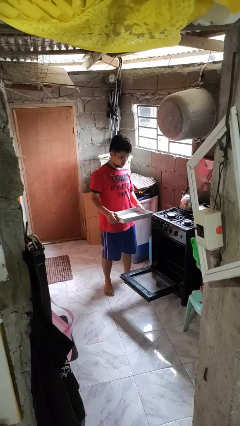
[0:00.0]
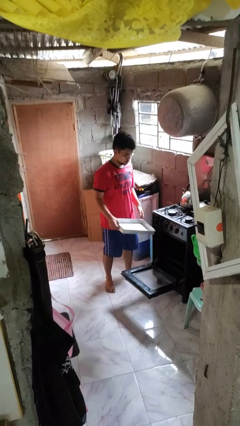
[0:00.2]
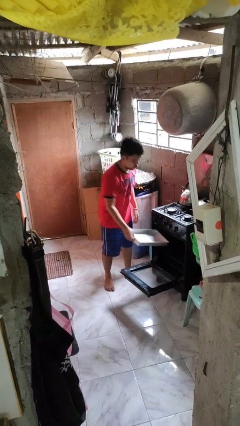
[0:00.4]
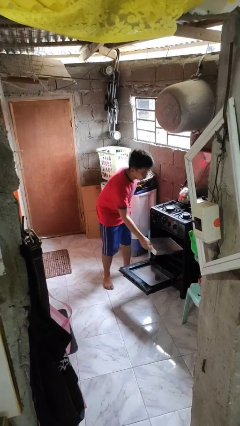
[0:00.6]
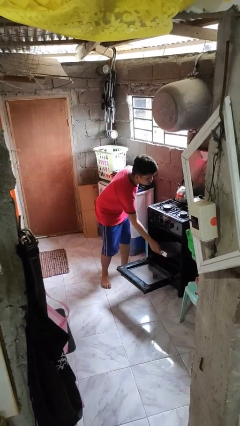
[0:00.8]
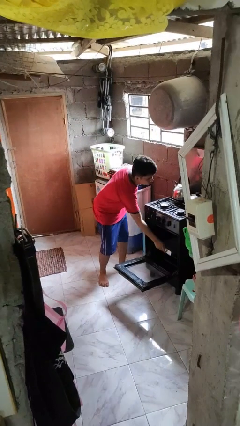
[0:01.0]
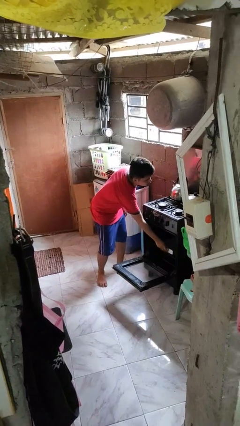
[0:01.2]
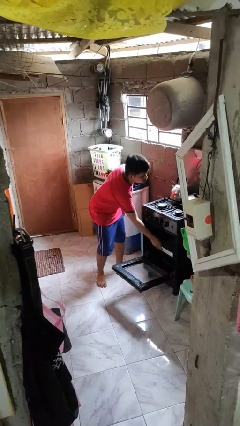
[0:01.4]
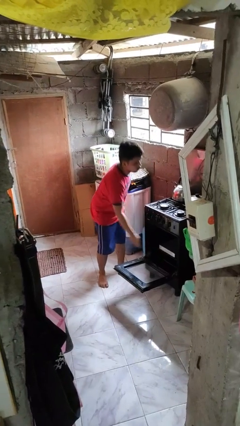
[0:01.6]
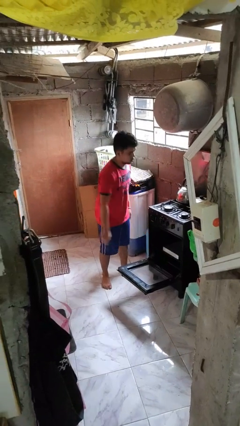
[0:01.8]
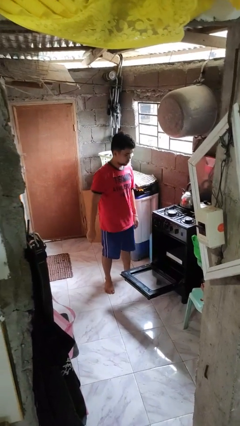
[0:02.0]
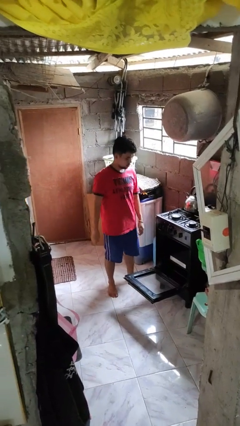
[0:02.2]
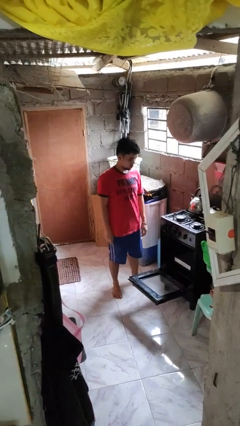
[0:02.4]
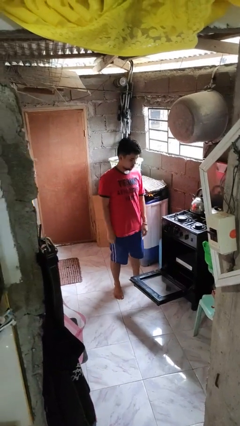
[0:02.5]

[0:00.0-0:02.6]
person puts object into oven

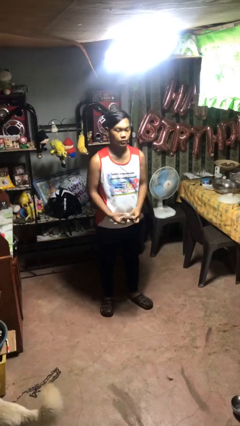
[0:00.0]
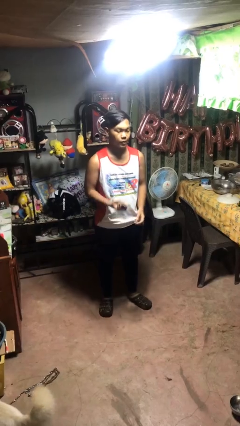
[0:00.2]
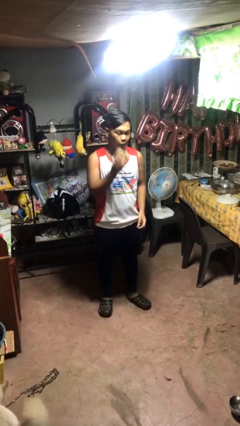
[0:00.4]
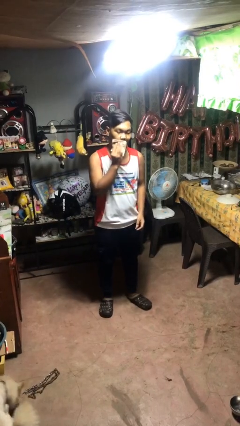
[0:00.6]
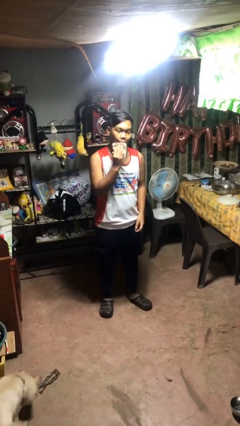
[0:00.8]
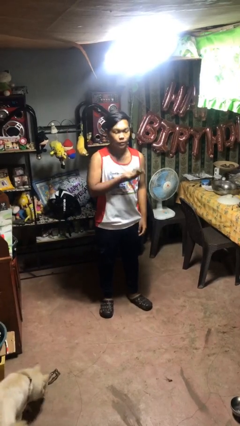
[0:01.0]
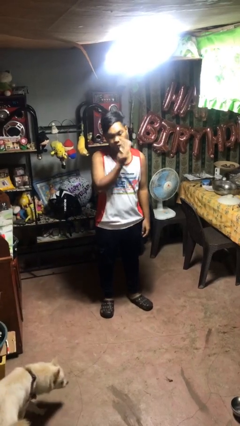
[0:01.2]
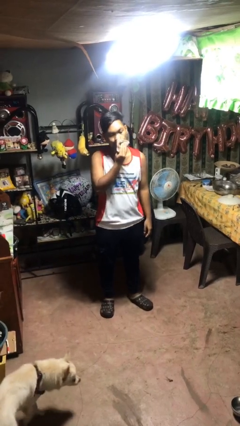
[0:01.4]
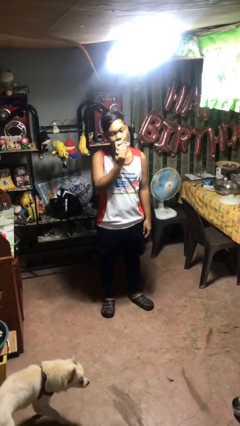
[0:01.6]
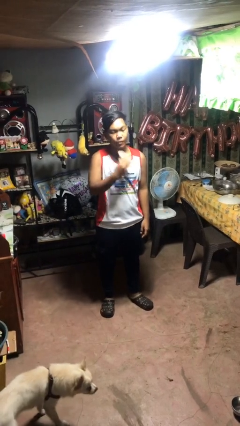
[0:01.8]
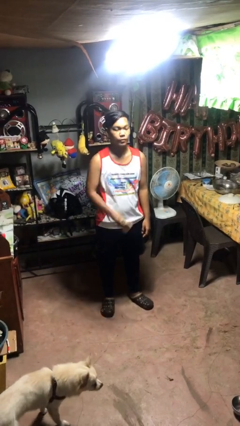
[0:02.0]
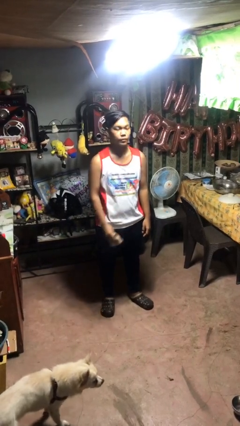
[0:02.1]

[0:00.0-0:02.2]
person wipes mouth with napkin

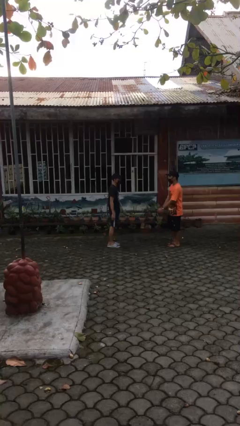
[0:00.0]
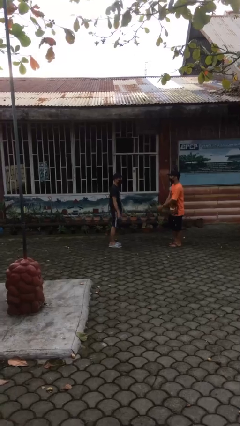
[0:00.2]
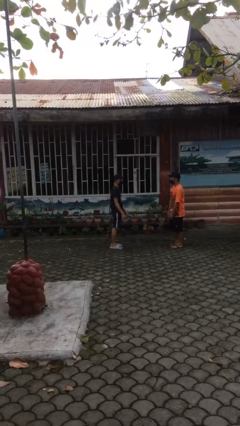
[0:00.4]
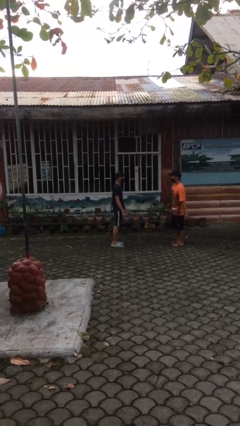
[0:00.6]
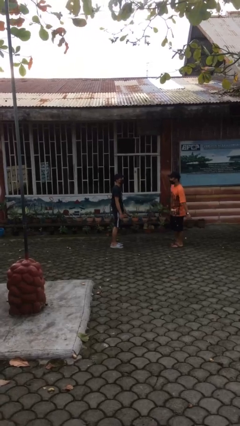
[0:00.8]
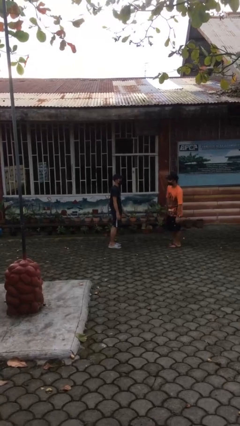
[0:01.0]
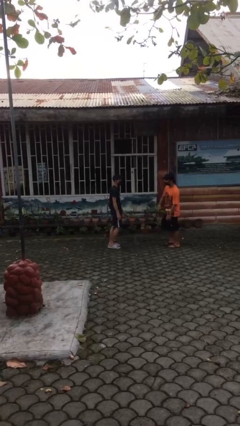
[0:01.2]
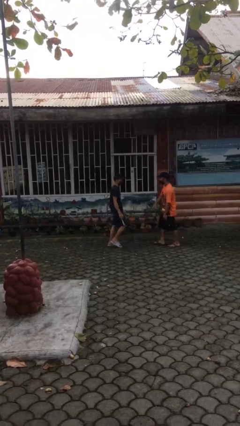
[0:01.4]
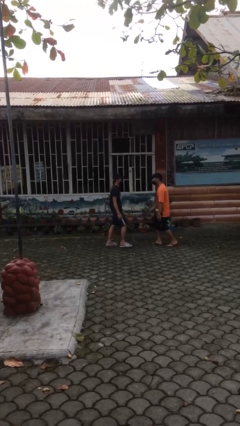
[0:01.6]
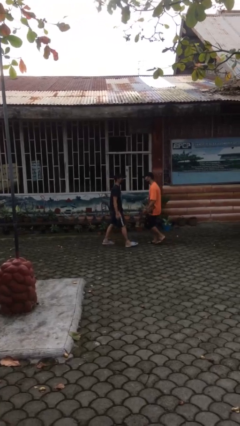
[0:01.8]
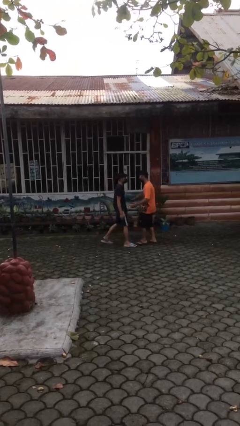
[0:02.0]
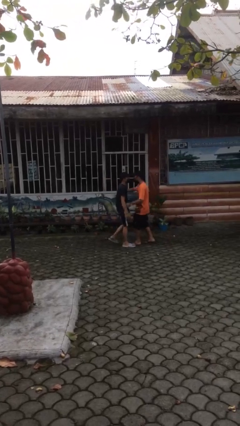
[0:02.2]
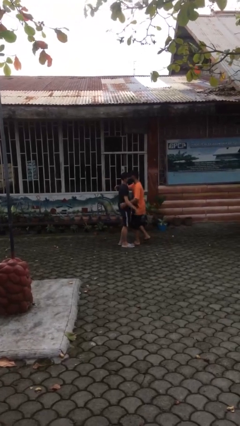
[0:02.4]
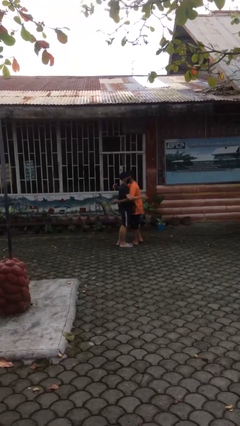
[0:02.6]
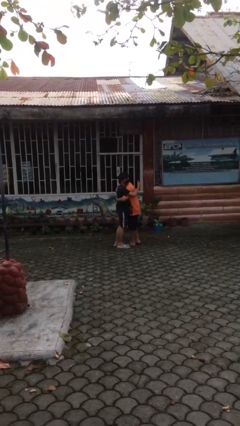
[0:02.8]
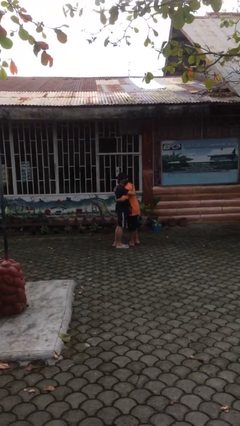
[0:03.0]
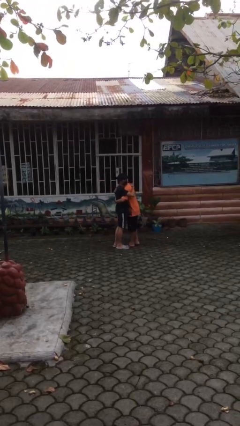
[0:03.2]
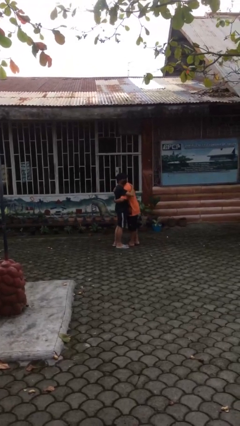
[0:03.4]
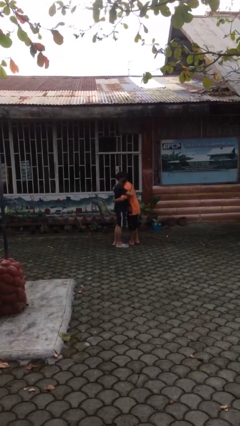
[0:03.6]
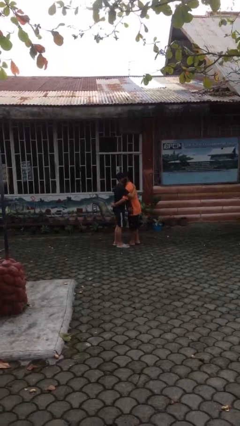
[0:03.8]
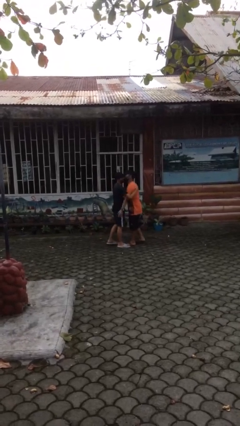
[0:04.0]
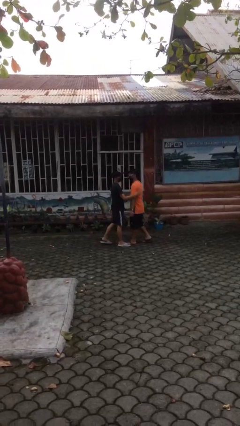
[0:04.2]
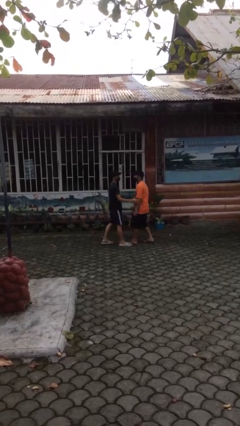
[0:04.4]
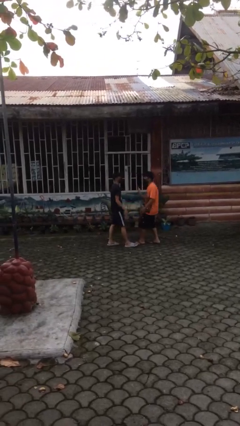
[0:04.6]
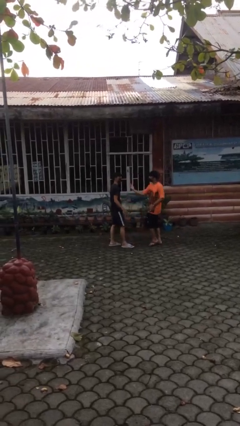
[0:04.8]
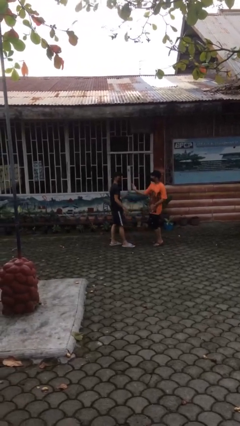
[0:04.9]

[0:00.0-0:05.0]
person embraces person

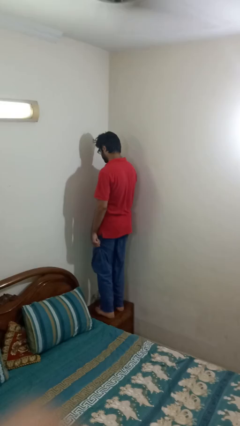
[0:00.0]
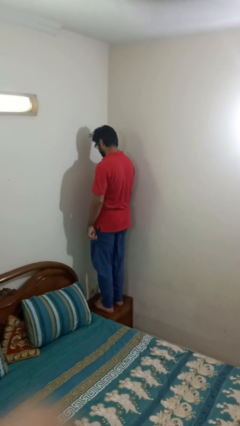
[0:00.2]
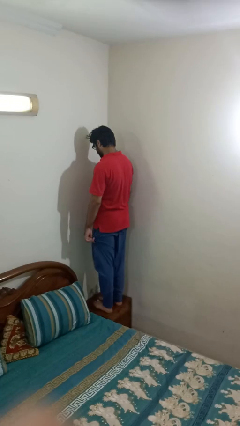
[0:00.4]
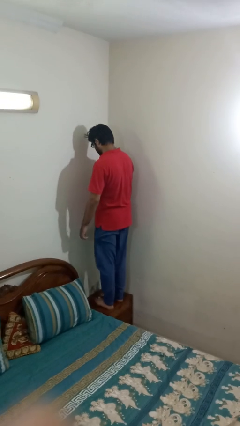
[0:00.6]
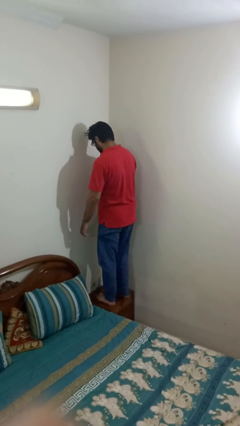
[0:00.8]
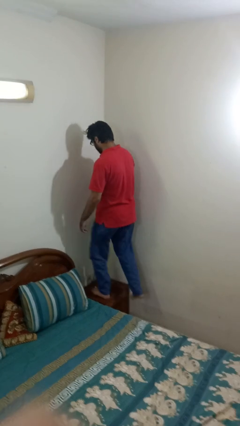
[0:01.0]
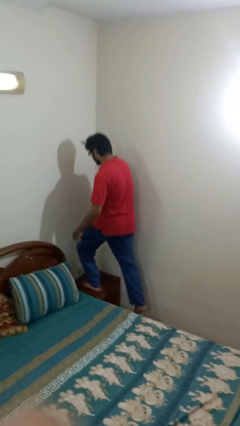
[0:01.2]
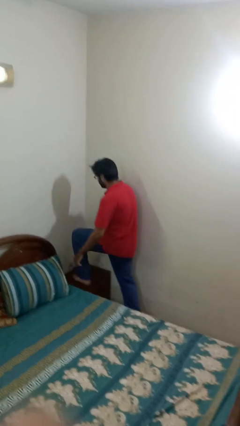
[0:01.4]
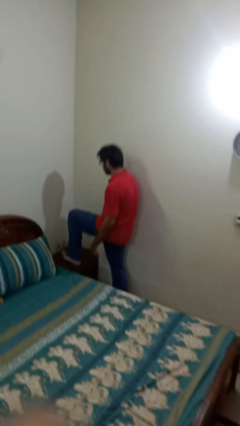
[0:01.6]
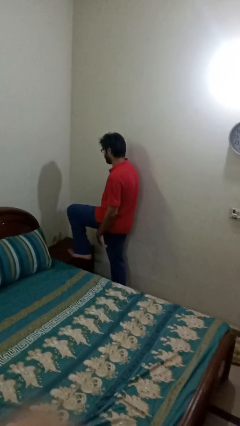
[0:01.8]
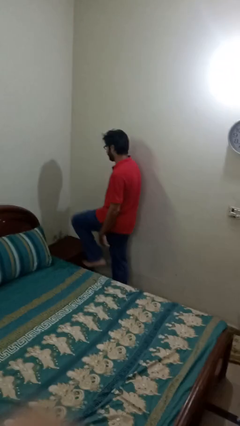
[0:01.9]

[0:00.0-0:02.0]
person climbs off table

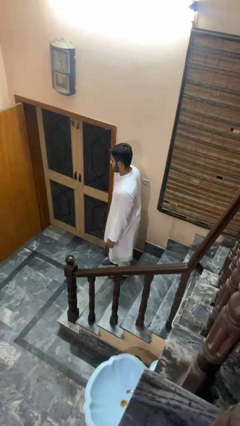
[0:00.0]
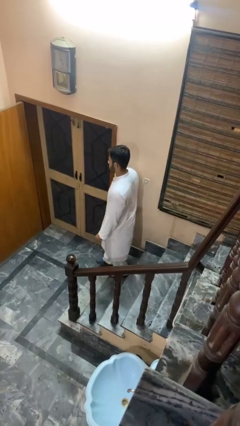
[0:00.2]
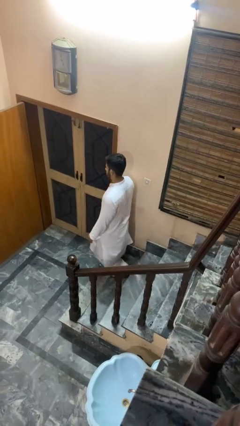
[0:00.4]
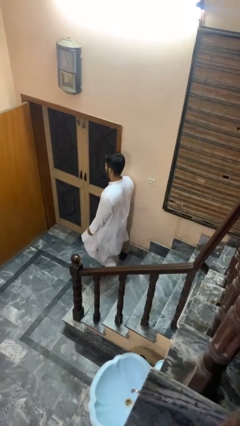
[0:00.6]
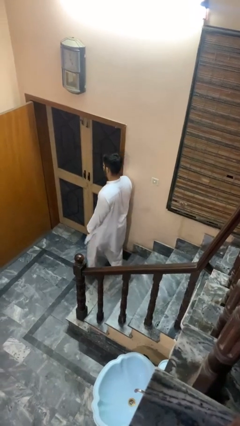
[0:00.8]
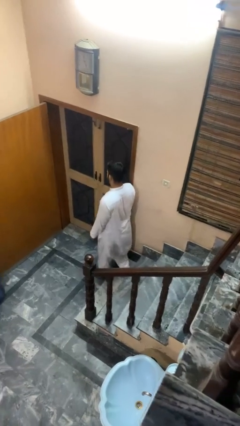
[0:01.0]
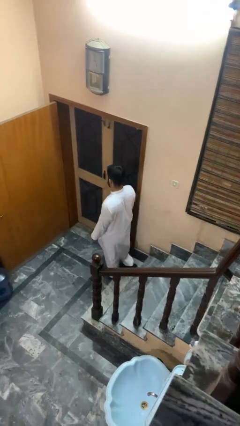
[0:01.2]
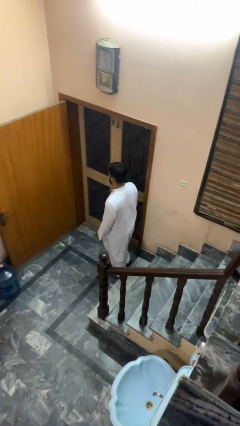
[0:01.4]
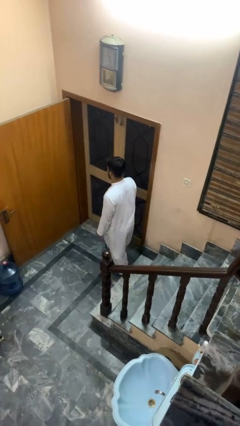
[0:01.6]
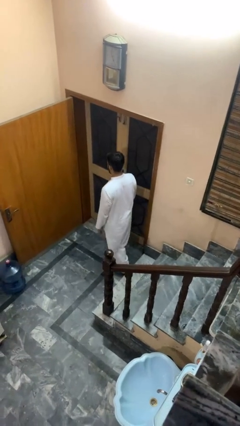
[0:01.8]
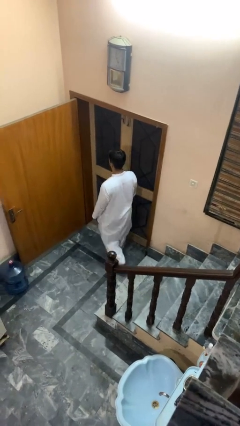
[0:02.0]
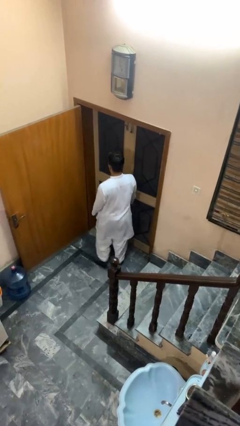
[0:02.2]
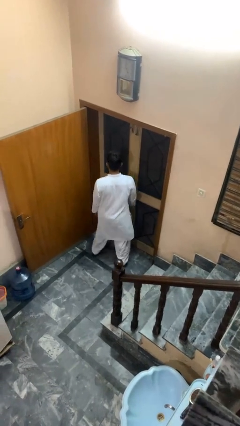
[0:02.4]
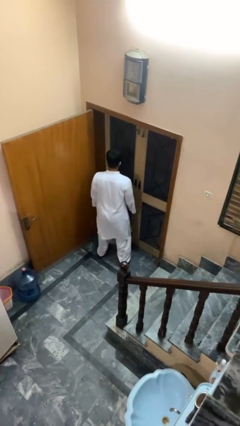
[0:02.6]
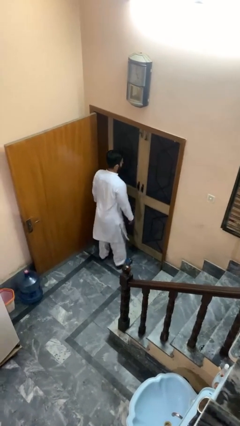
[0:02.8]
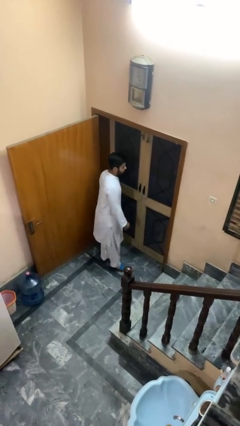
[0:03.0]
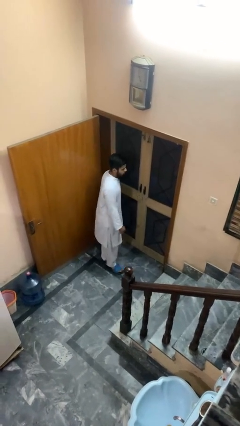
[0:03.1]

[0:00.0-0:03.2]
person climbs down stairs

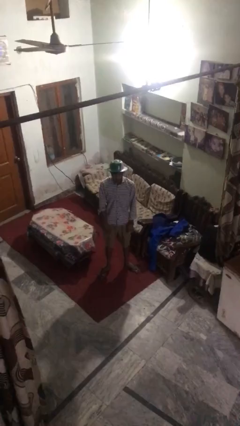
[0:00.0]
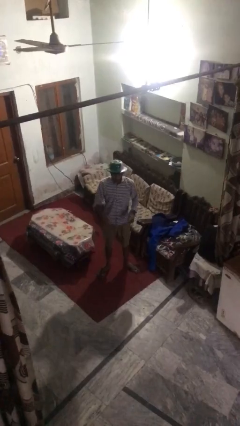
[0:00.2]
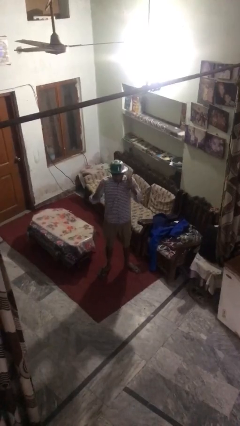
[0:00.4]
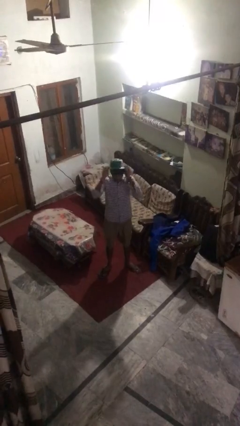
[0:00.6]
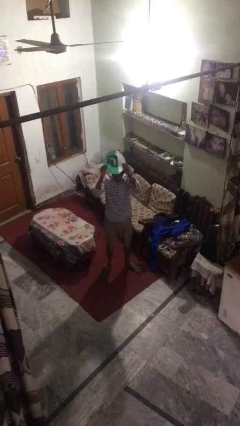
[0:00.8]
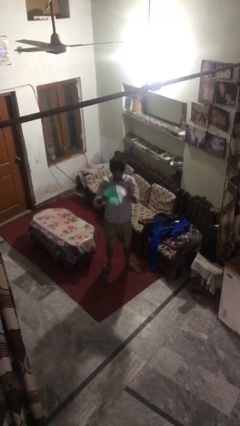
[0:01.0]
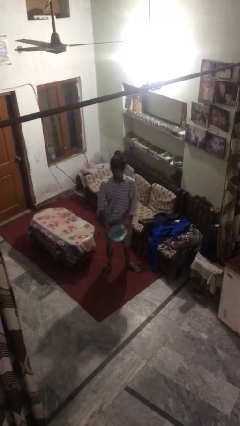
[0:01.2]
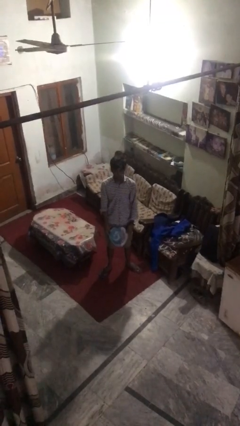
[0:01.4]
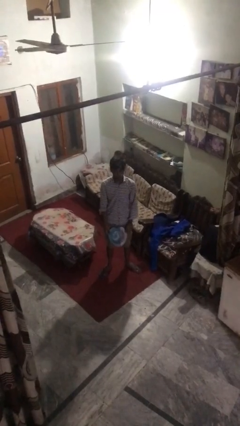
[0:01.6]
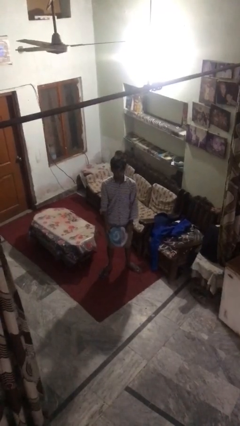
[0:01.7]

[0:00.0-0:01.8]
person takes off hat

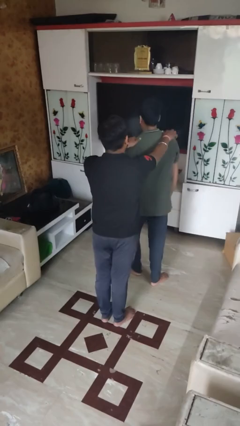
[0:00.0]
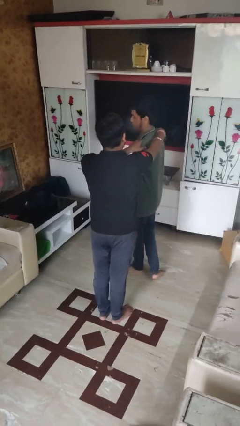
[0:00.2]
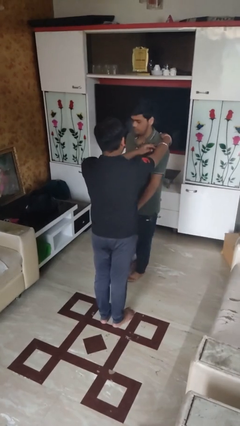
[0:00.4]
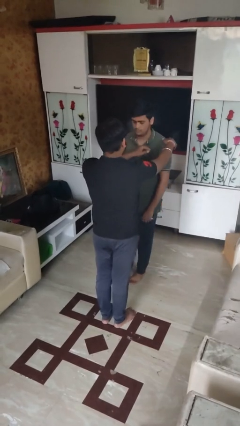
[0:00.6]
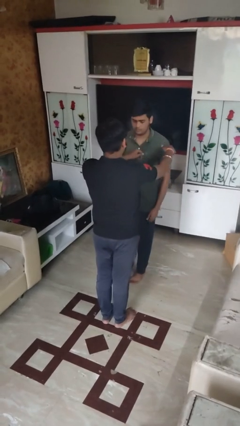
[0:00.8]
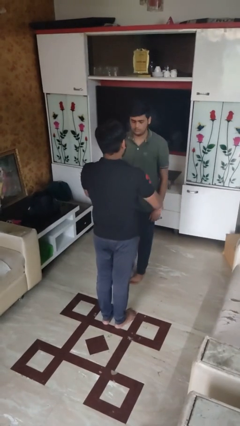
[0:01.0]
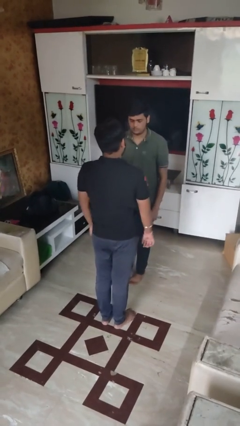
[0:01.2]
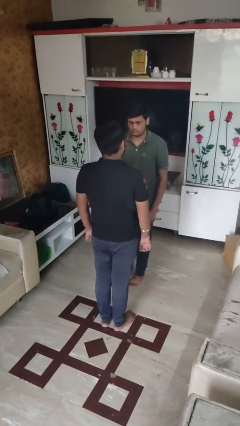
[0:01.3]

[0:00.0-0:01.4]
person spins person around
